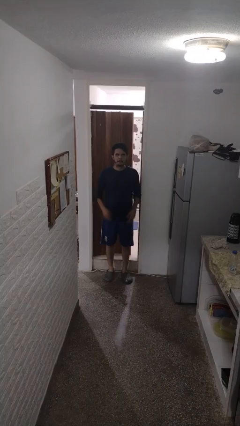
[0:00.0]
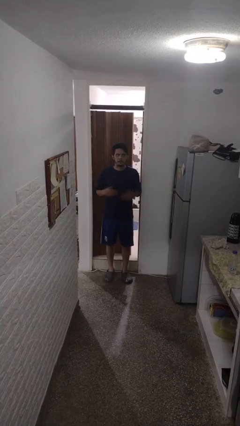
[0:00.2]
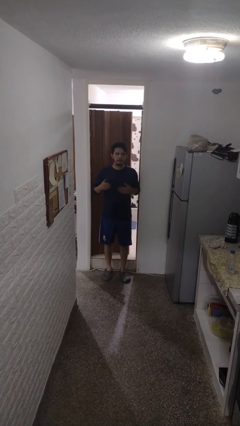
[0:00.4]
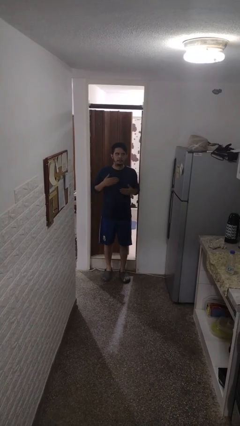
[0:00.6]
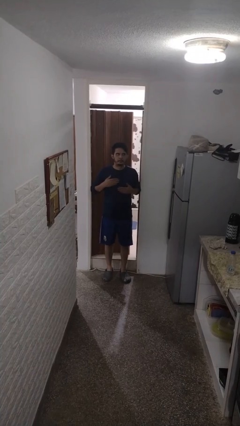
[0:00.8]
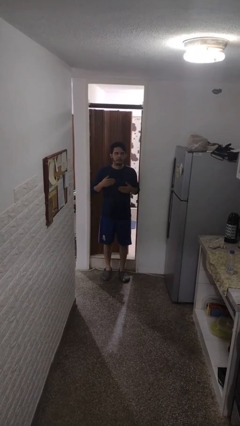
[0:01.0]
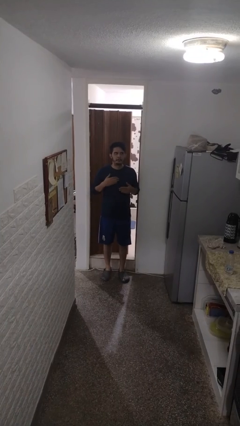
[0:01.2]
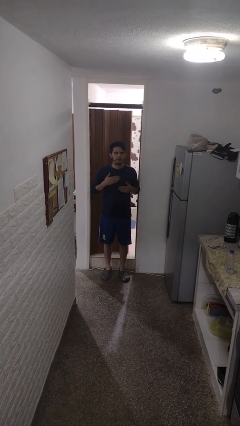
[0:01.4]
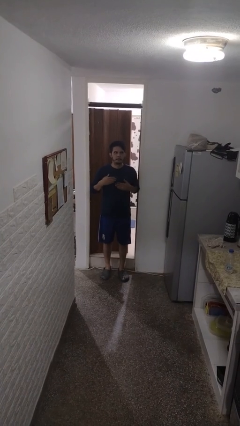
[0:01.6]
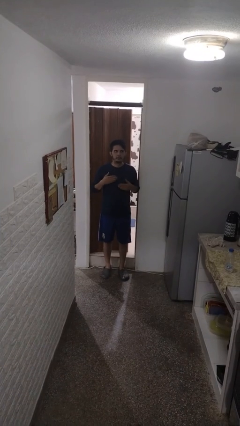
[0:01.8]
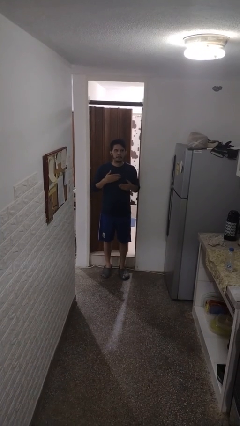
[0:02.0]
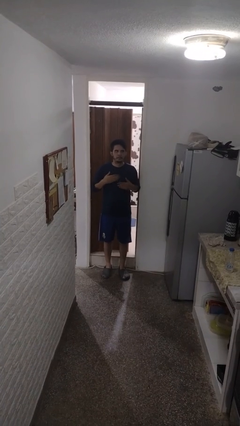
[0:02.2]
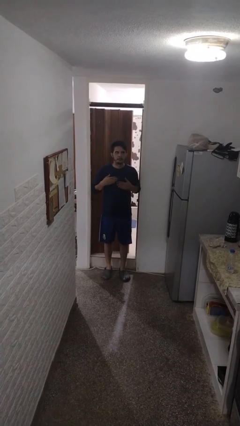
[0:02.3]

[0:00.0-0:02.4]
person drums on chest

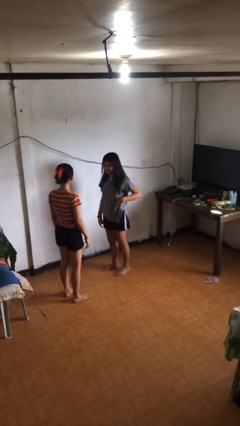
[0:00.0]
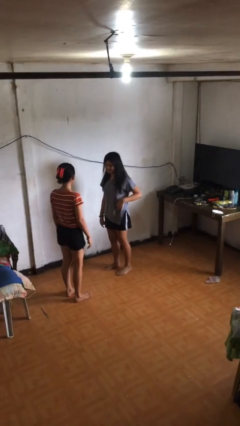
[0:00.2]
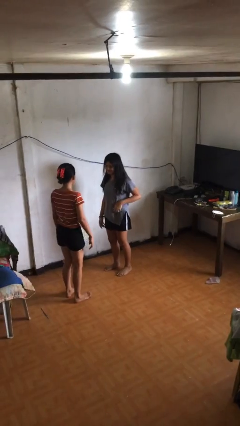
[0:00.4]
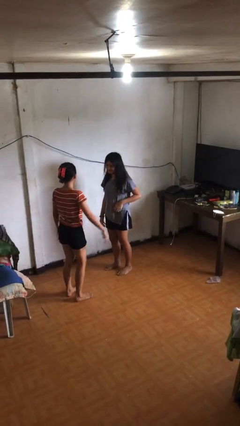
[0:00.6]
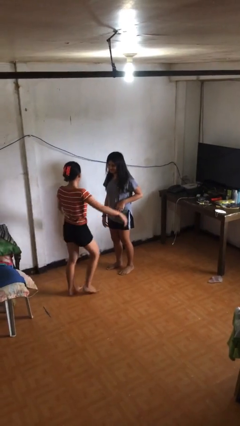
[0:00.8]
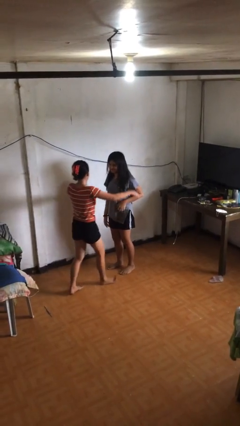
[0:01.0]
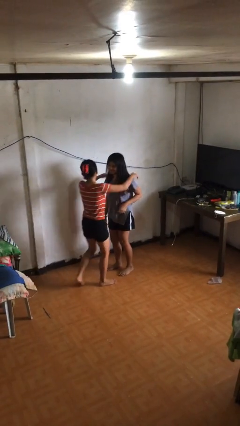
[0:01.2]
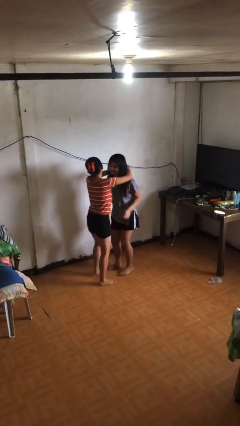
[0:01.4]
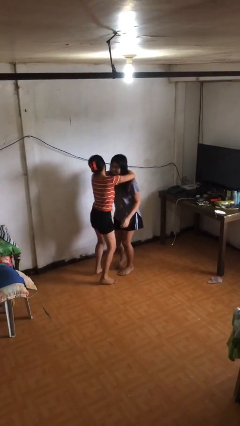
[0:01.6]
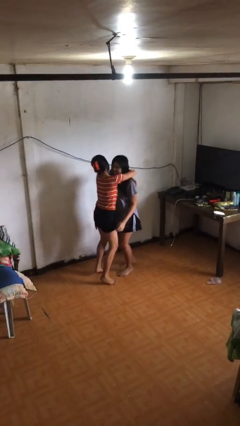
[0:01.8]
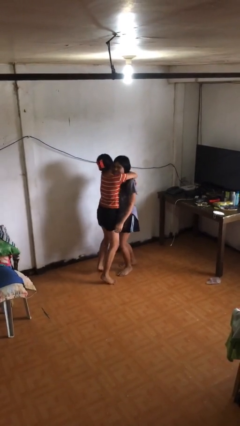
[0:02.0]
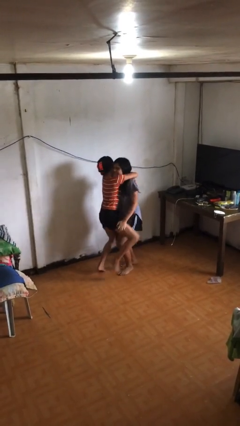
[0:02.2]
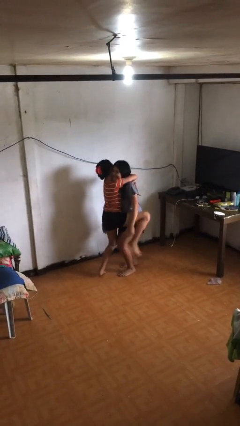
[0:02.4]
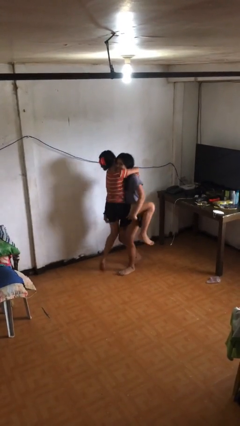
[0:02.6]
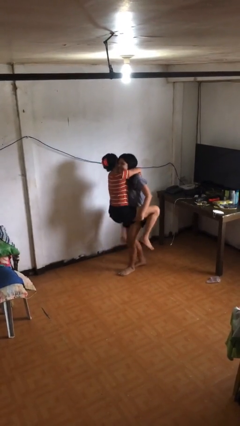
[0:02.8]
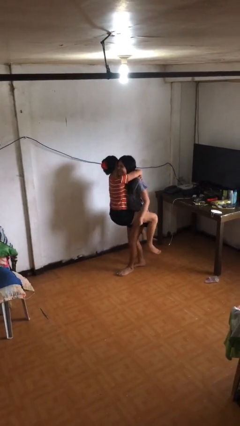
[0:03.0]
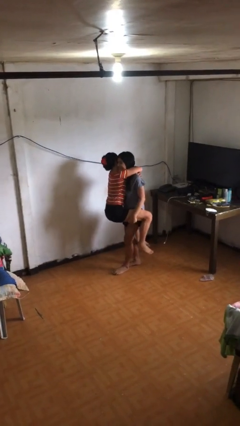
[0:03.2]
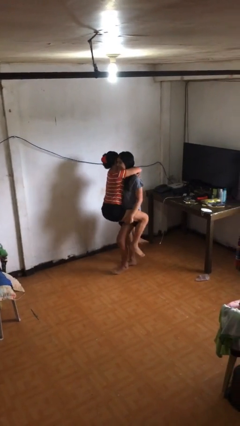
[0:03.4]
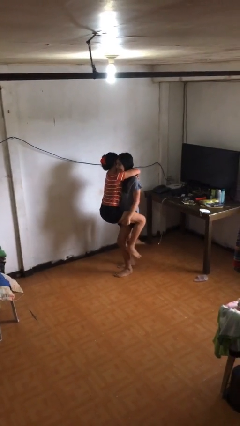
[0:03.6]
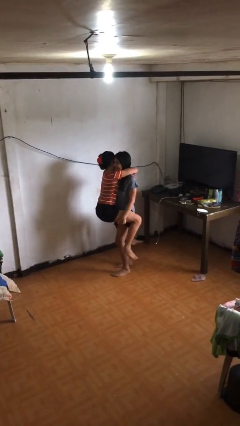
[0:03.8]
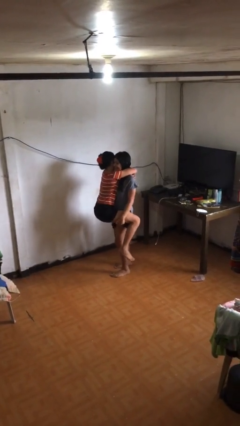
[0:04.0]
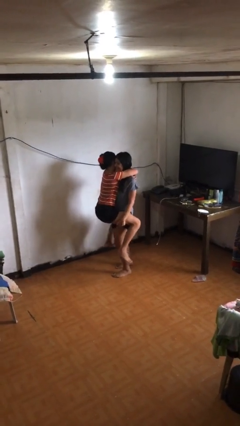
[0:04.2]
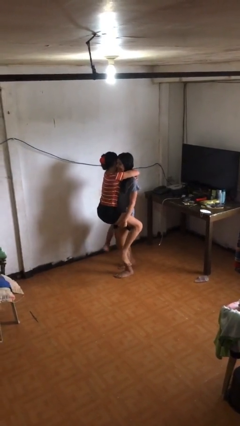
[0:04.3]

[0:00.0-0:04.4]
person picks up person

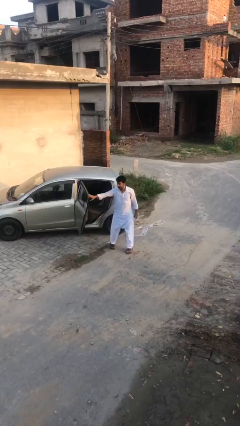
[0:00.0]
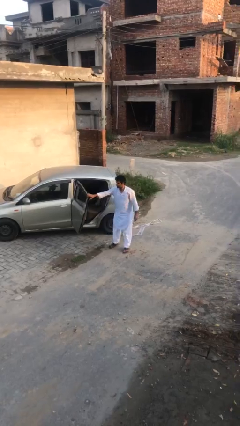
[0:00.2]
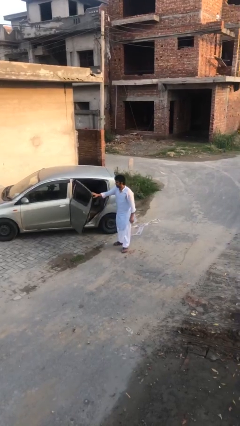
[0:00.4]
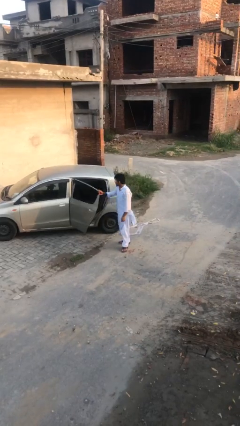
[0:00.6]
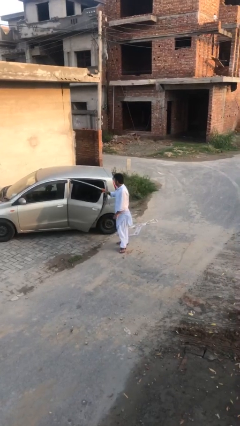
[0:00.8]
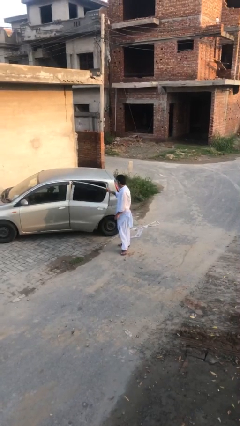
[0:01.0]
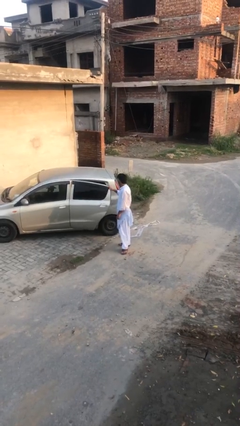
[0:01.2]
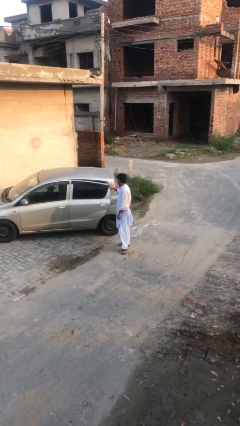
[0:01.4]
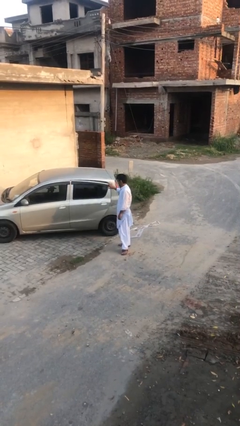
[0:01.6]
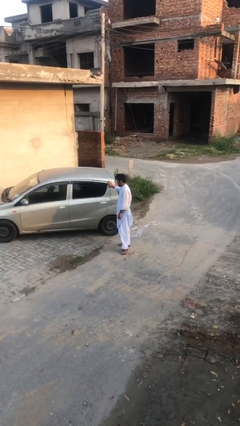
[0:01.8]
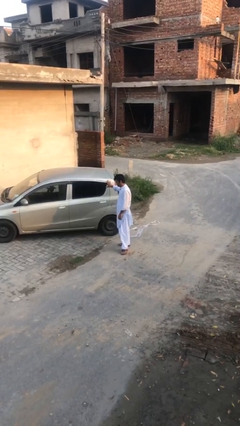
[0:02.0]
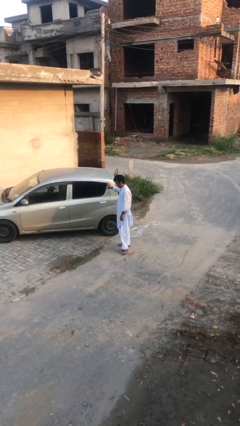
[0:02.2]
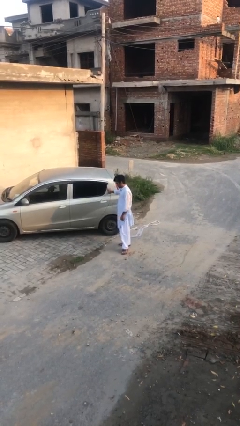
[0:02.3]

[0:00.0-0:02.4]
person closes car door

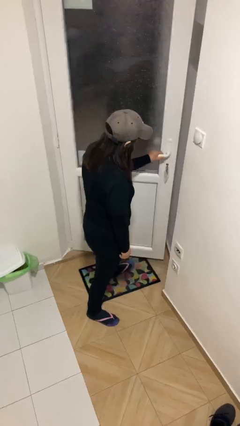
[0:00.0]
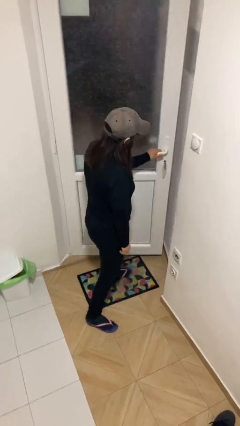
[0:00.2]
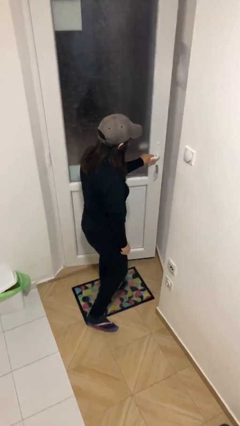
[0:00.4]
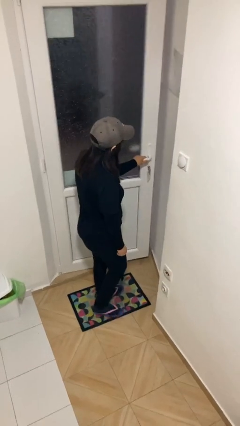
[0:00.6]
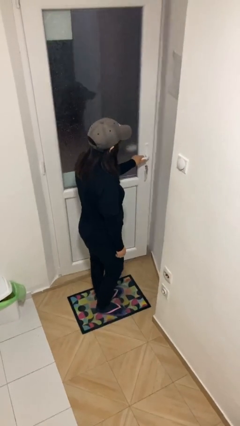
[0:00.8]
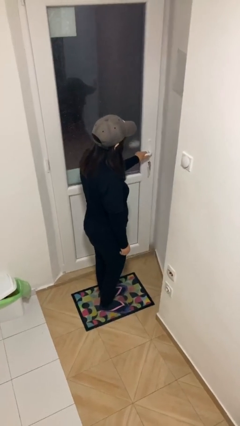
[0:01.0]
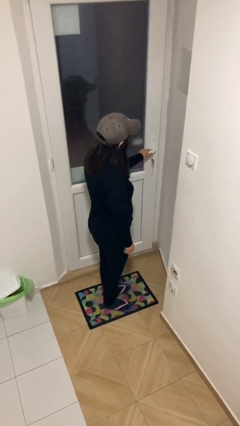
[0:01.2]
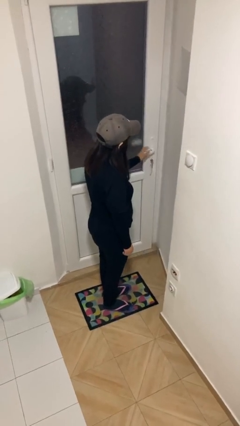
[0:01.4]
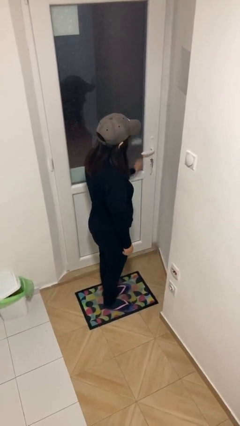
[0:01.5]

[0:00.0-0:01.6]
person closes facility door

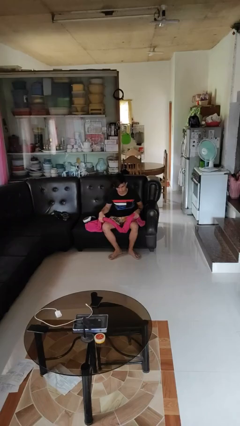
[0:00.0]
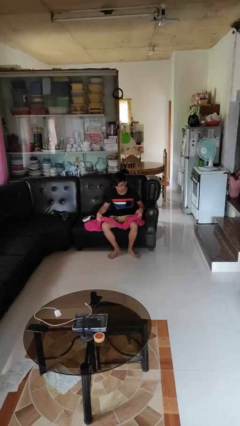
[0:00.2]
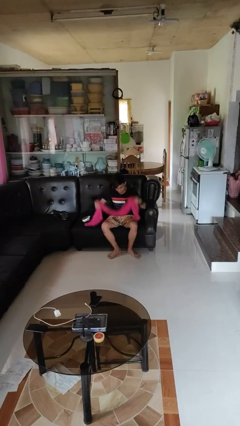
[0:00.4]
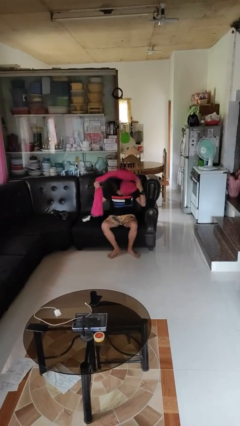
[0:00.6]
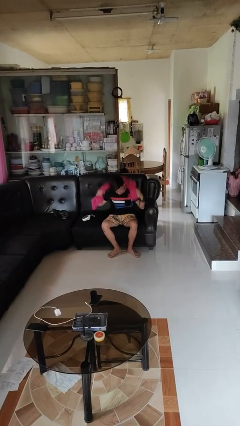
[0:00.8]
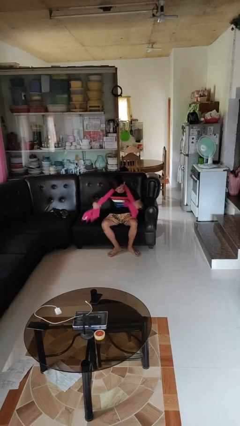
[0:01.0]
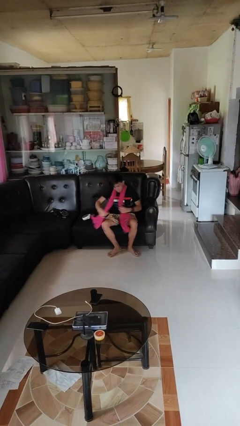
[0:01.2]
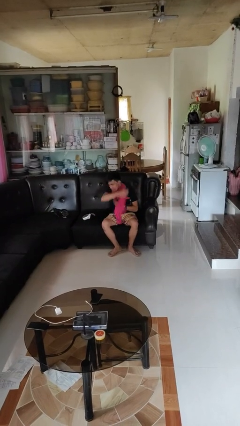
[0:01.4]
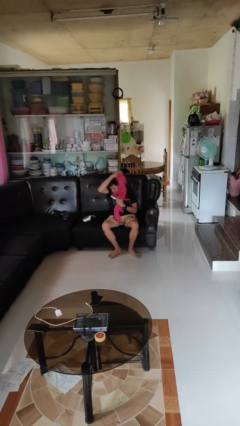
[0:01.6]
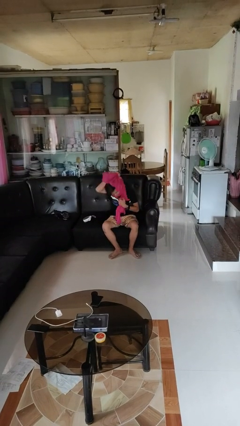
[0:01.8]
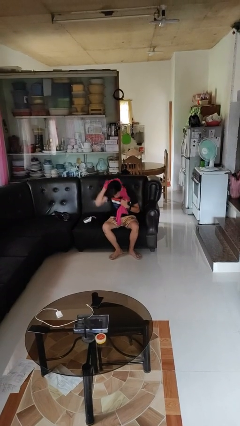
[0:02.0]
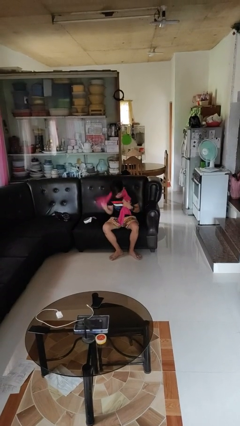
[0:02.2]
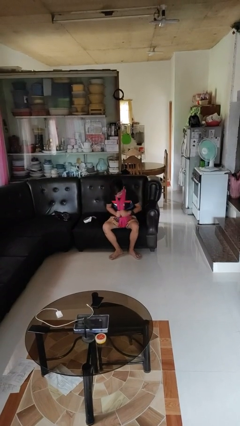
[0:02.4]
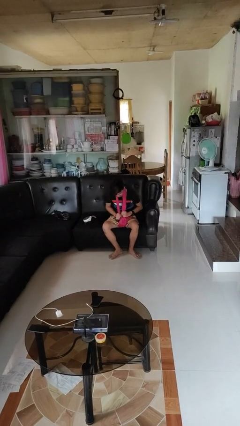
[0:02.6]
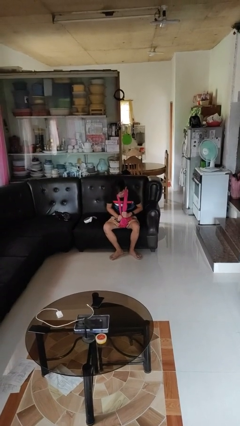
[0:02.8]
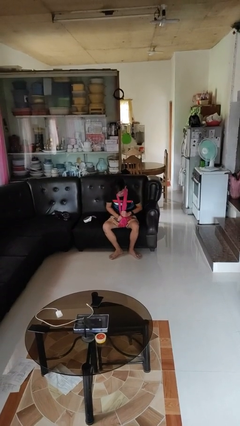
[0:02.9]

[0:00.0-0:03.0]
person puts on scarf

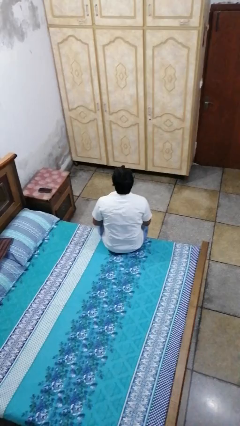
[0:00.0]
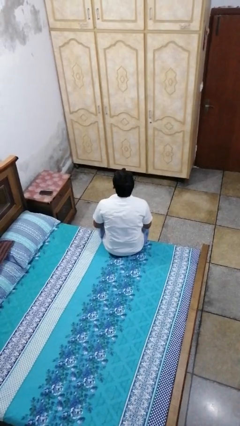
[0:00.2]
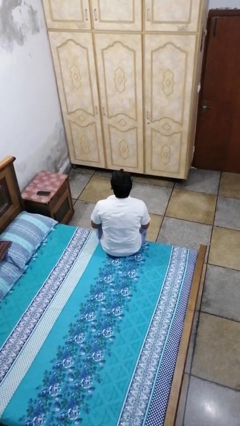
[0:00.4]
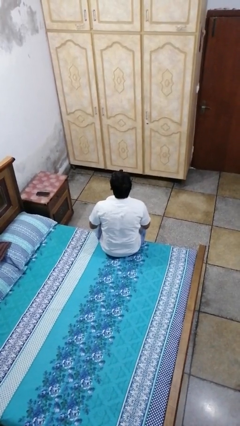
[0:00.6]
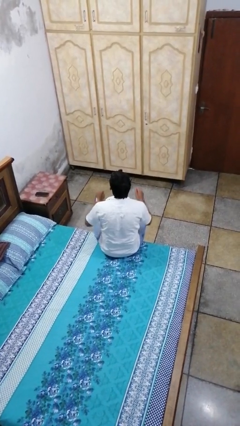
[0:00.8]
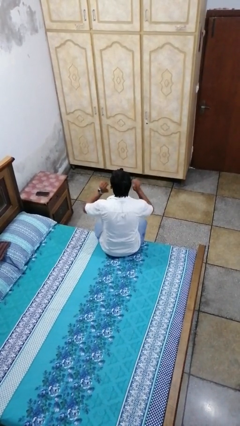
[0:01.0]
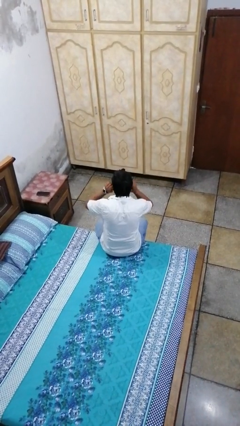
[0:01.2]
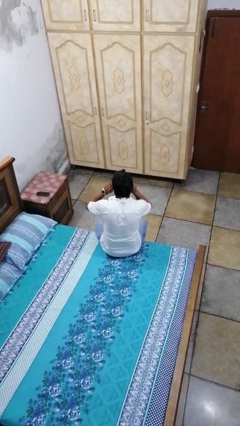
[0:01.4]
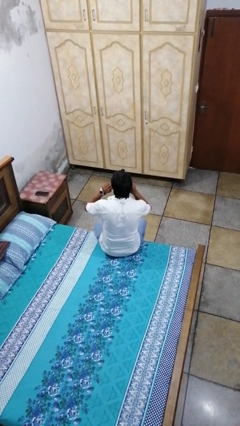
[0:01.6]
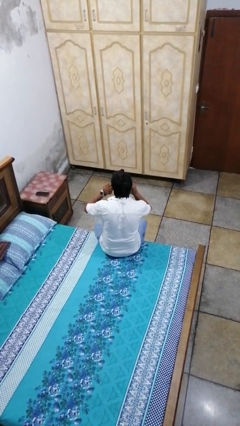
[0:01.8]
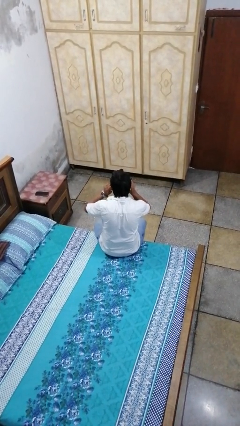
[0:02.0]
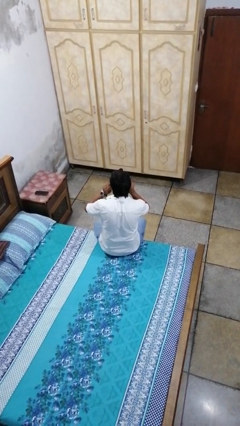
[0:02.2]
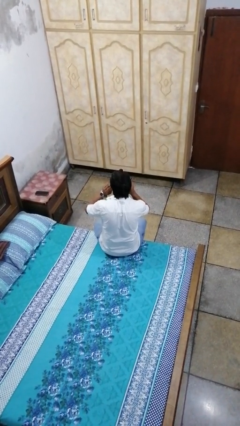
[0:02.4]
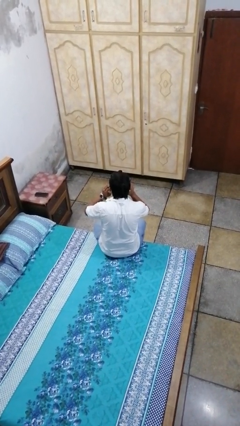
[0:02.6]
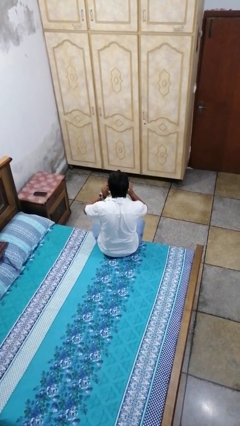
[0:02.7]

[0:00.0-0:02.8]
person touches earlobe

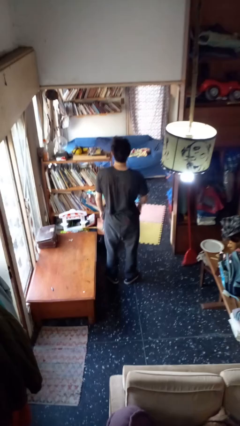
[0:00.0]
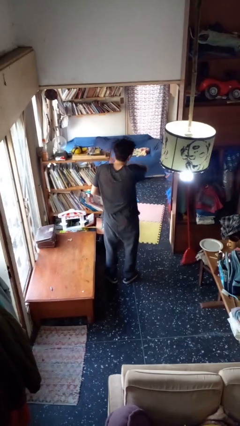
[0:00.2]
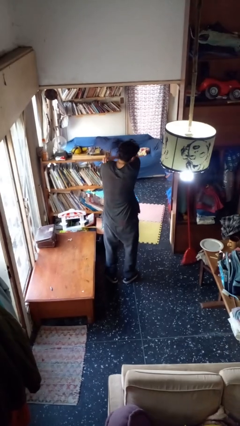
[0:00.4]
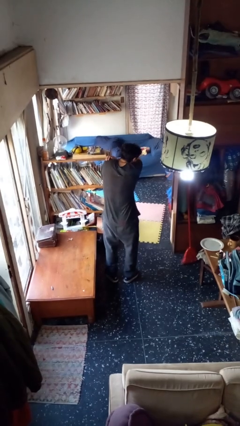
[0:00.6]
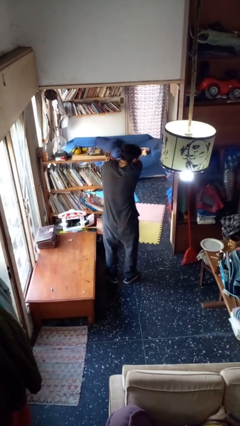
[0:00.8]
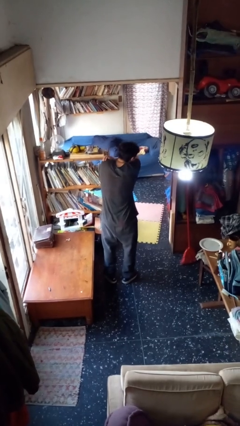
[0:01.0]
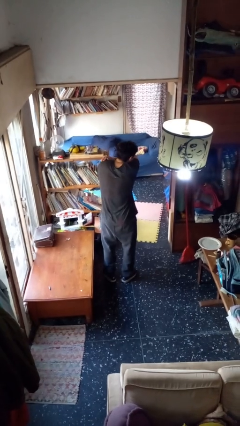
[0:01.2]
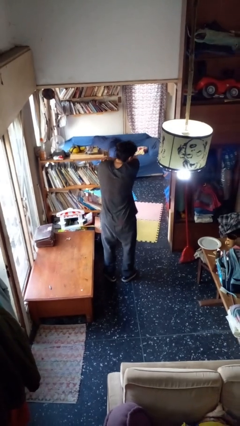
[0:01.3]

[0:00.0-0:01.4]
person sneezes into arm
